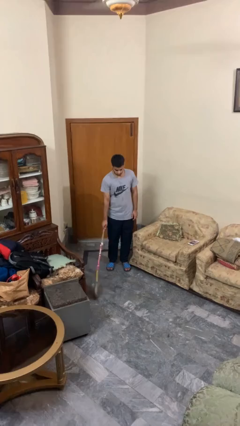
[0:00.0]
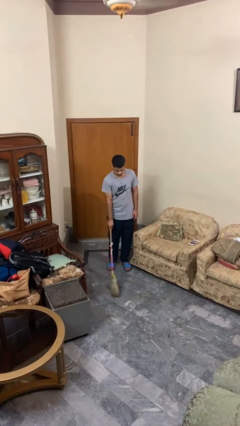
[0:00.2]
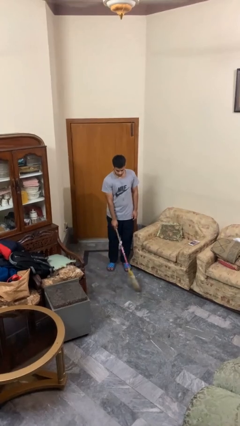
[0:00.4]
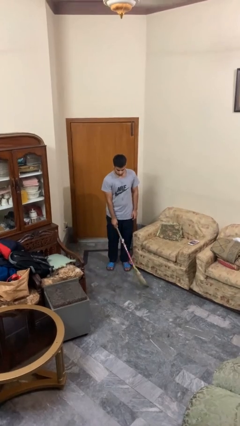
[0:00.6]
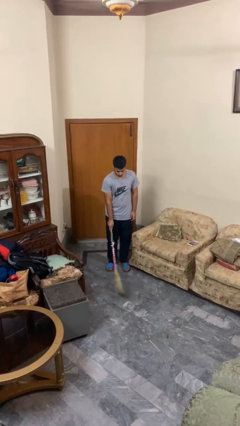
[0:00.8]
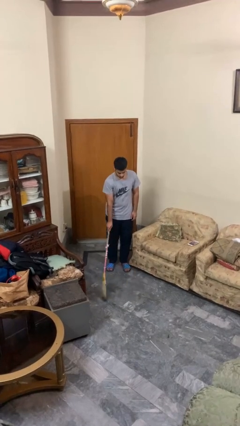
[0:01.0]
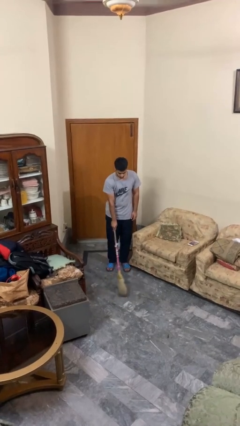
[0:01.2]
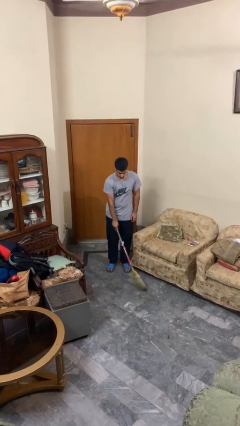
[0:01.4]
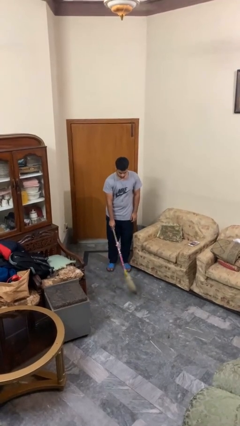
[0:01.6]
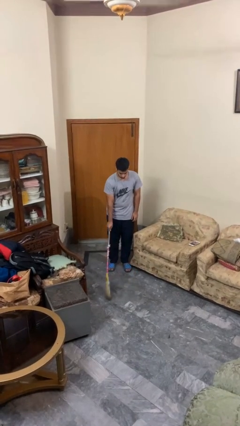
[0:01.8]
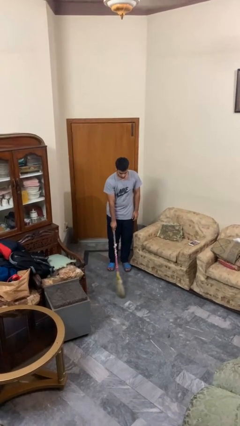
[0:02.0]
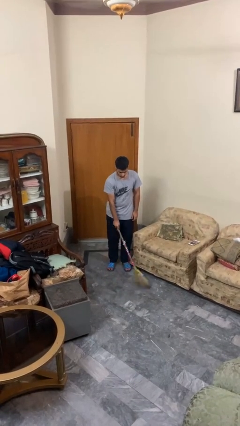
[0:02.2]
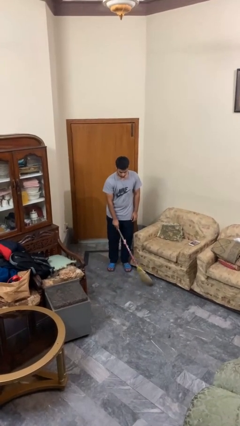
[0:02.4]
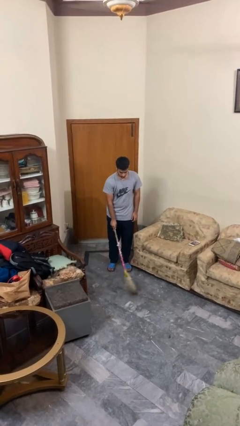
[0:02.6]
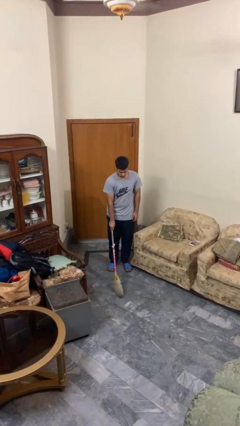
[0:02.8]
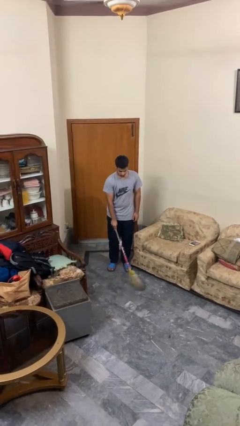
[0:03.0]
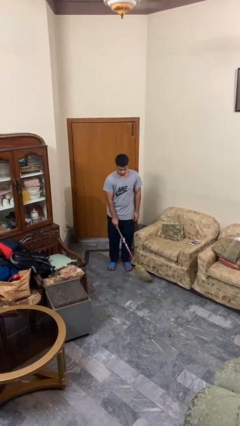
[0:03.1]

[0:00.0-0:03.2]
person sweeps floor

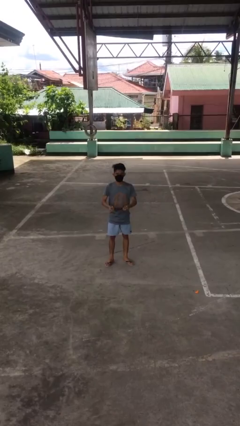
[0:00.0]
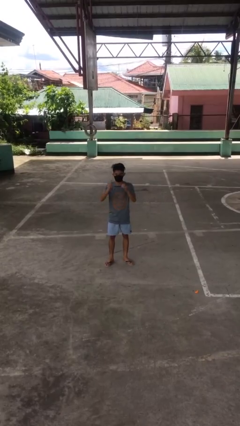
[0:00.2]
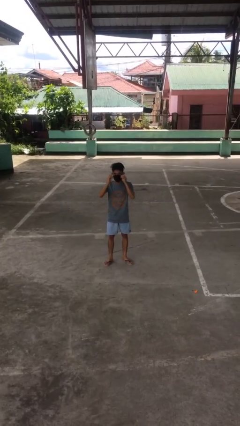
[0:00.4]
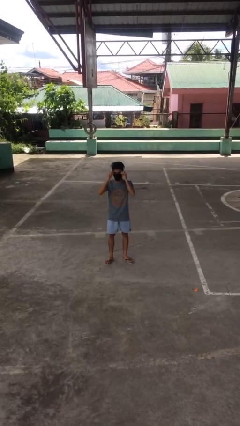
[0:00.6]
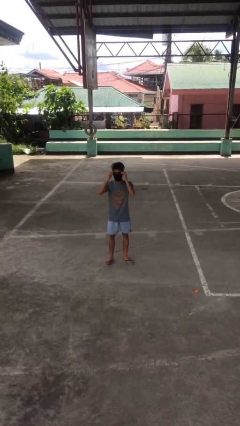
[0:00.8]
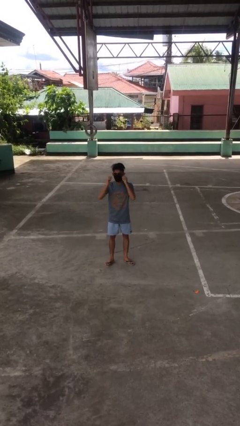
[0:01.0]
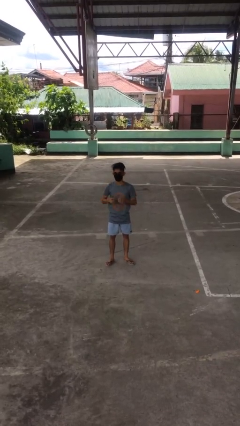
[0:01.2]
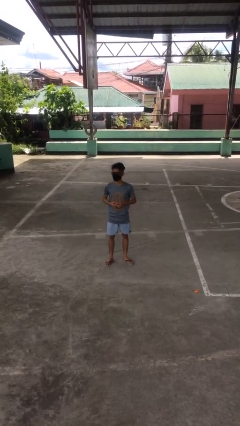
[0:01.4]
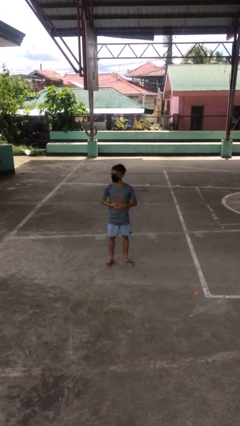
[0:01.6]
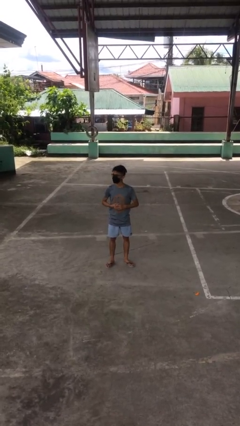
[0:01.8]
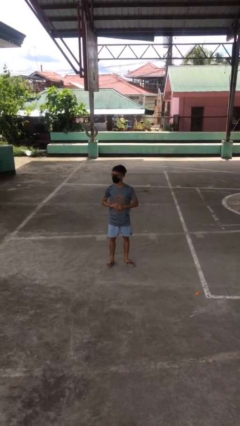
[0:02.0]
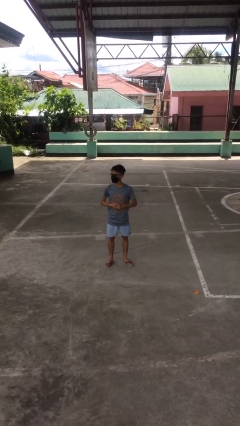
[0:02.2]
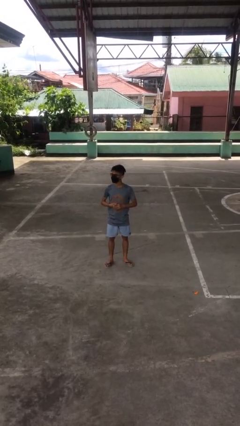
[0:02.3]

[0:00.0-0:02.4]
person puts on glasses

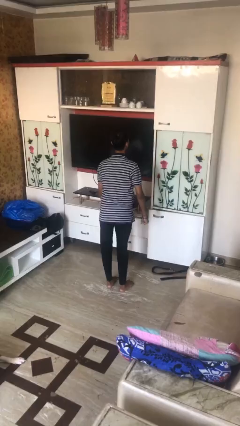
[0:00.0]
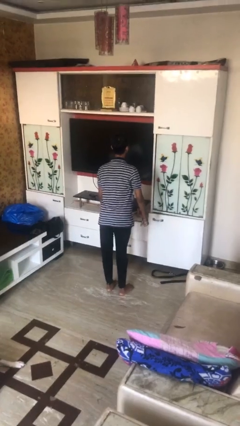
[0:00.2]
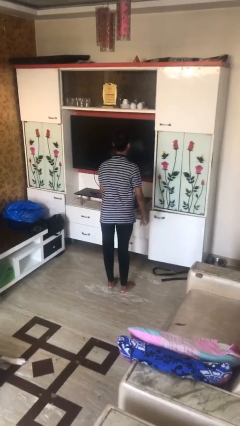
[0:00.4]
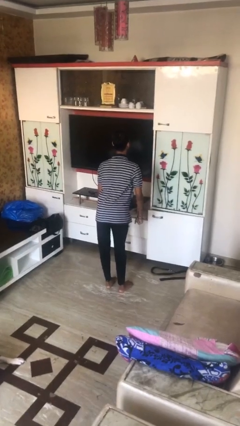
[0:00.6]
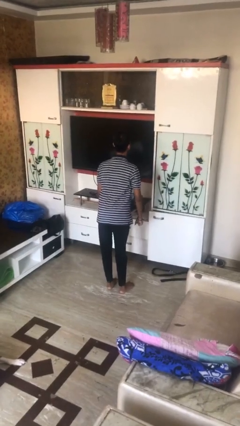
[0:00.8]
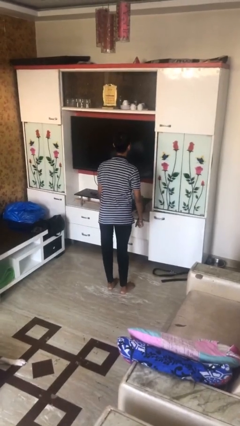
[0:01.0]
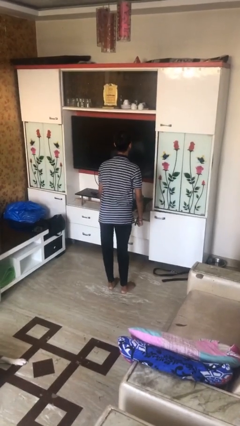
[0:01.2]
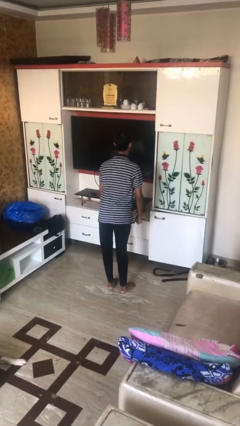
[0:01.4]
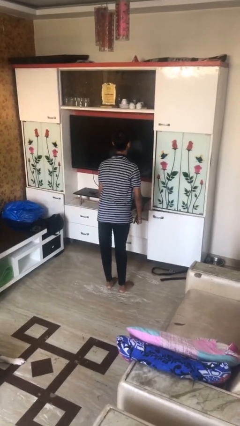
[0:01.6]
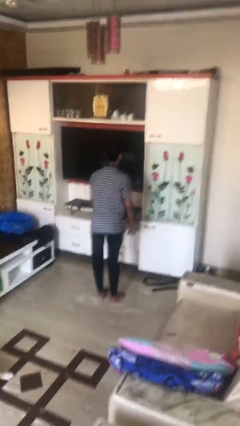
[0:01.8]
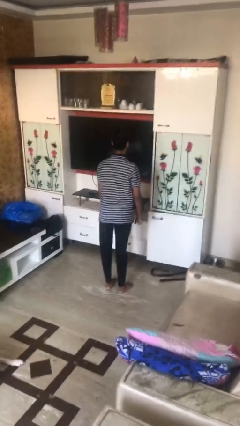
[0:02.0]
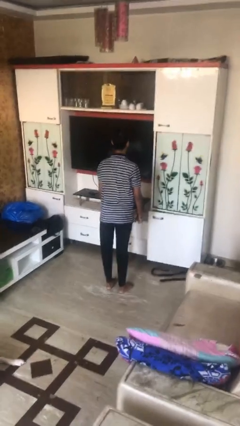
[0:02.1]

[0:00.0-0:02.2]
person wiggles hips

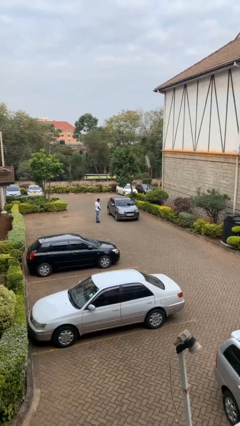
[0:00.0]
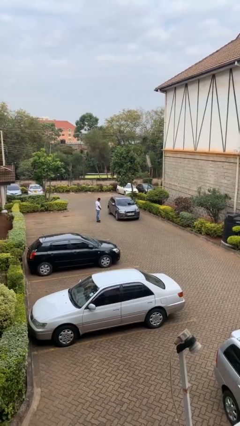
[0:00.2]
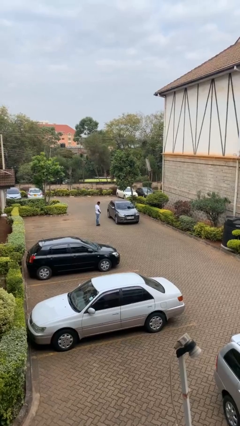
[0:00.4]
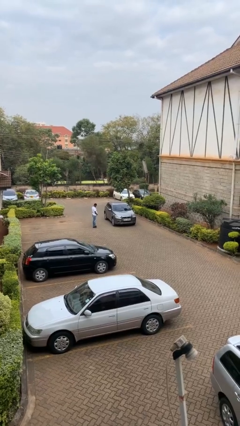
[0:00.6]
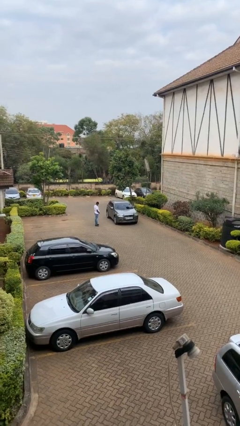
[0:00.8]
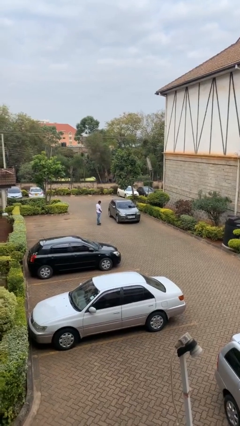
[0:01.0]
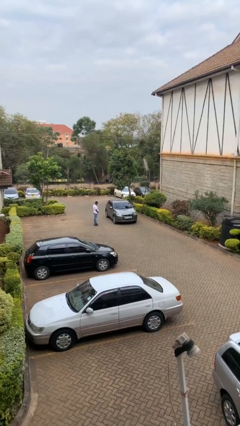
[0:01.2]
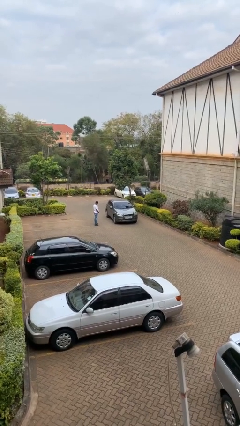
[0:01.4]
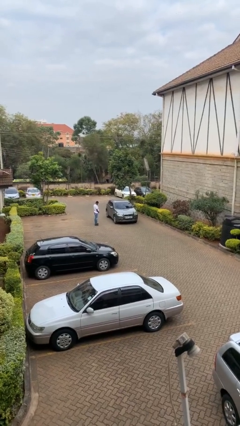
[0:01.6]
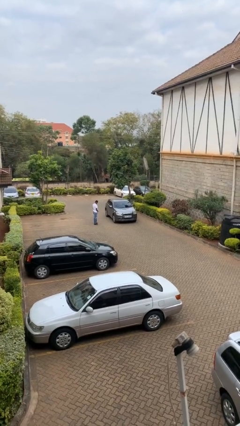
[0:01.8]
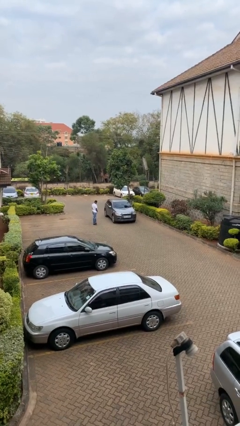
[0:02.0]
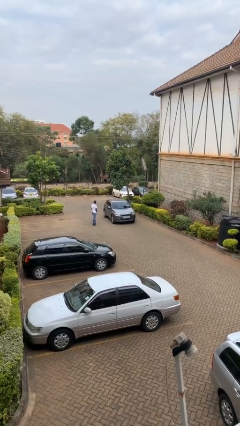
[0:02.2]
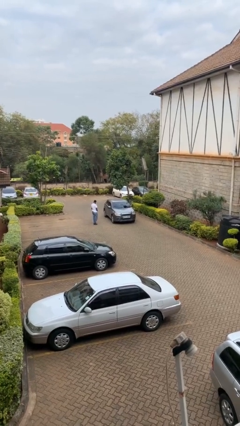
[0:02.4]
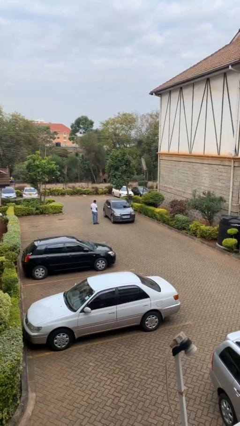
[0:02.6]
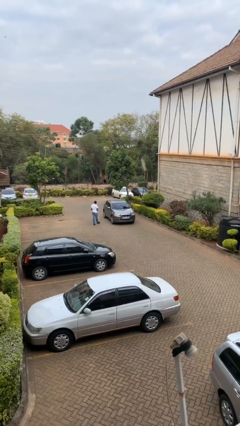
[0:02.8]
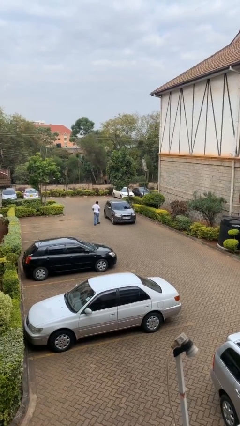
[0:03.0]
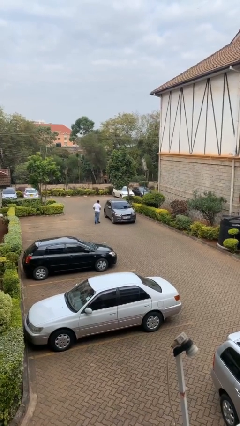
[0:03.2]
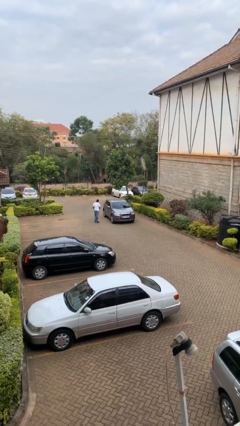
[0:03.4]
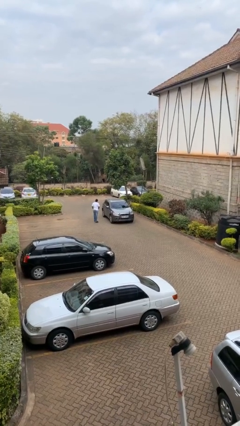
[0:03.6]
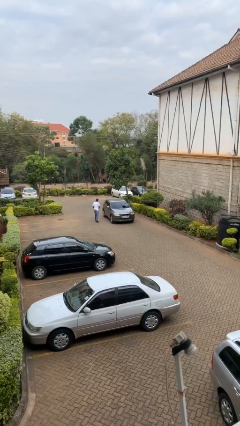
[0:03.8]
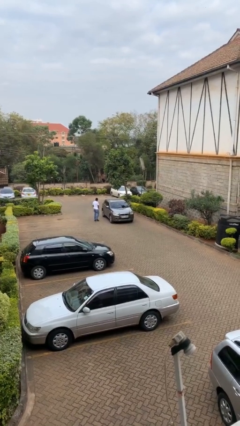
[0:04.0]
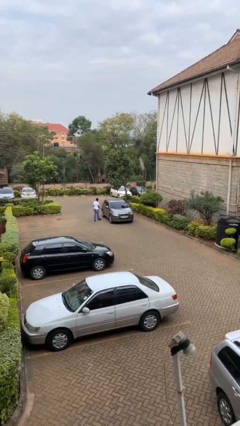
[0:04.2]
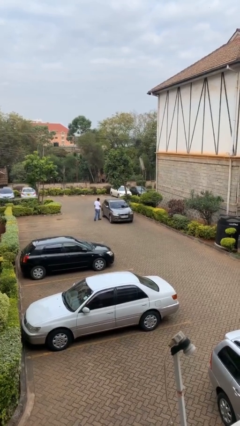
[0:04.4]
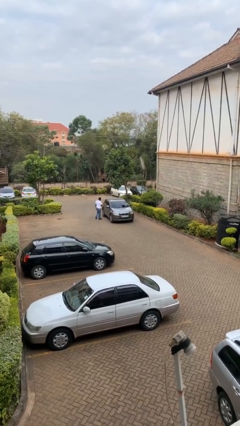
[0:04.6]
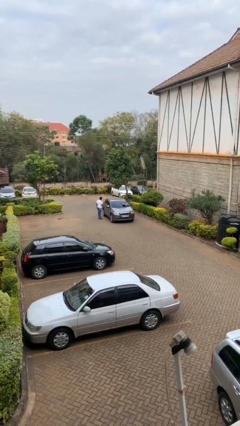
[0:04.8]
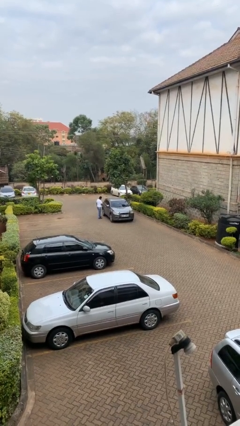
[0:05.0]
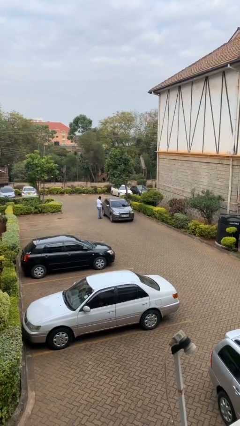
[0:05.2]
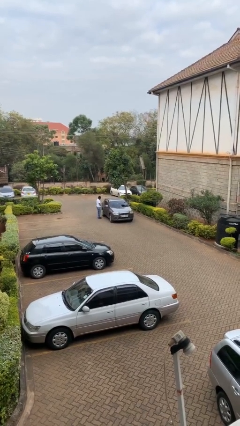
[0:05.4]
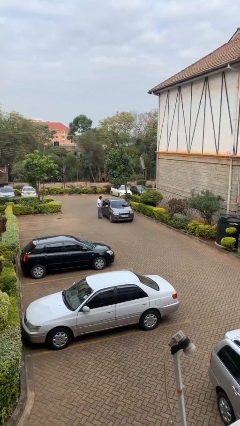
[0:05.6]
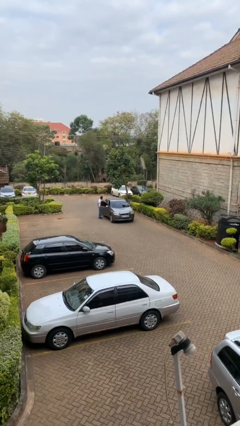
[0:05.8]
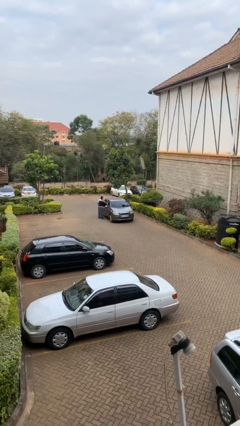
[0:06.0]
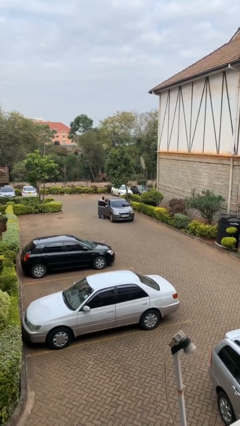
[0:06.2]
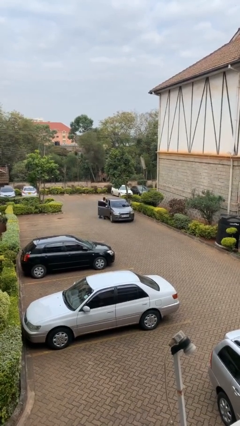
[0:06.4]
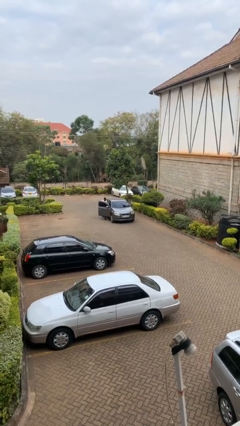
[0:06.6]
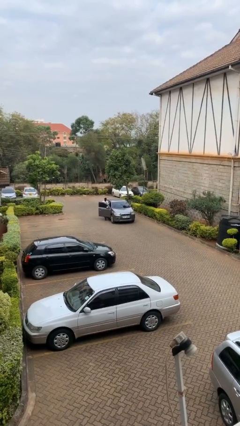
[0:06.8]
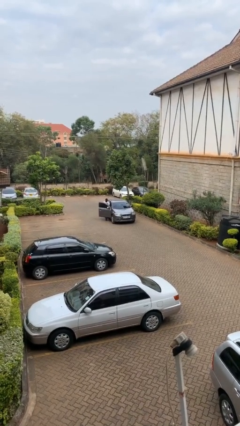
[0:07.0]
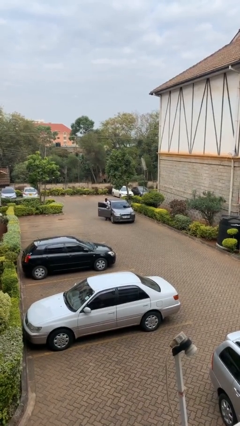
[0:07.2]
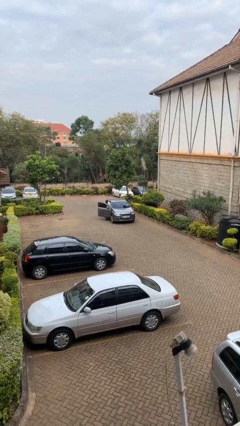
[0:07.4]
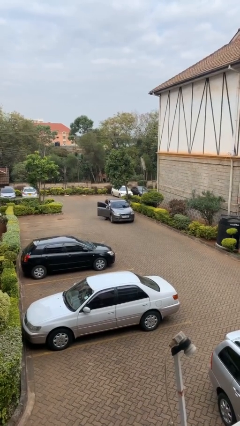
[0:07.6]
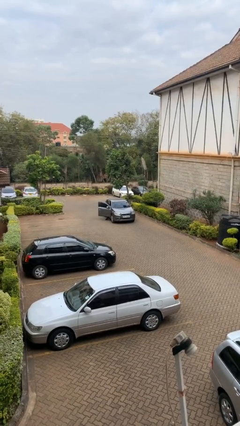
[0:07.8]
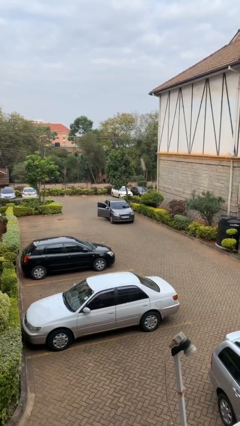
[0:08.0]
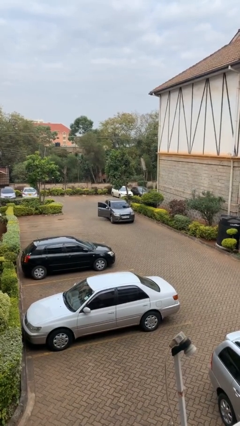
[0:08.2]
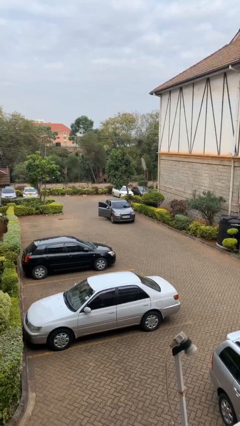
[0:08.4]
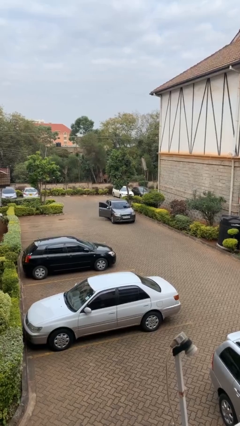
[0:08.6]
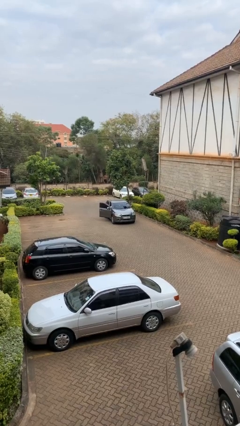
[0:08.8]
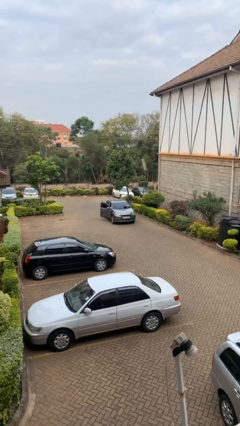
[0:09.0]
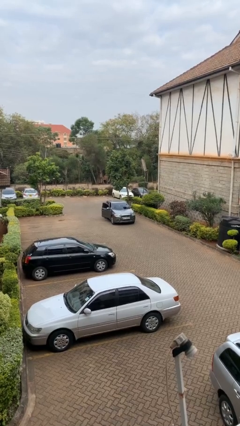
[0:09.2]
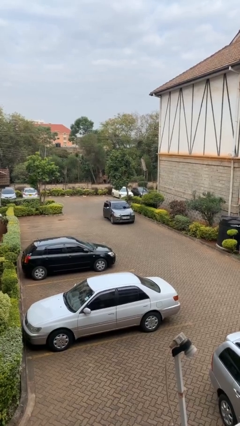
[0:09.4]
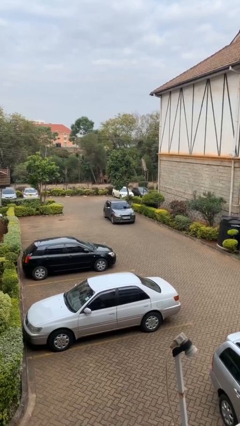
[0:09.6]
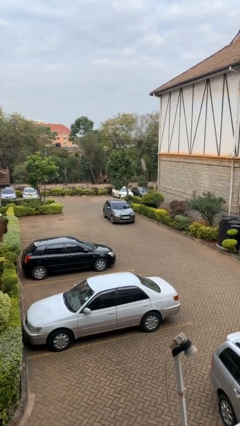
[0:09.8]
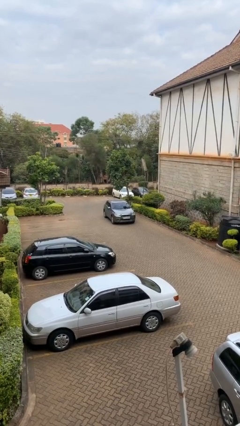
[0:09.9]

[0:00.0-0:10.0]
car picks up person
